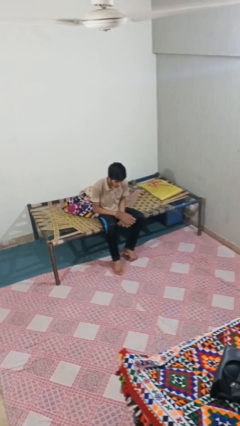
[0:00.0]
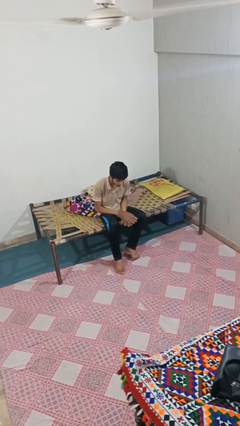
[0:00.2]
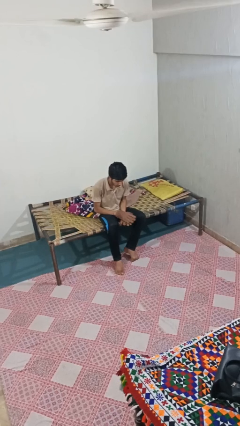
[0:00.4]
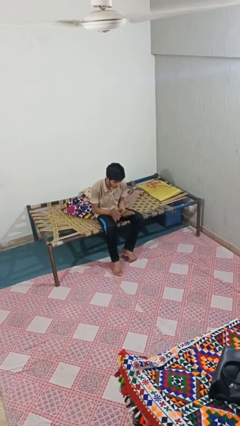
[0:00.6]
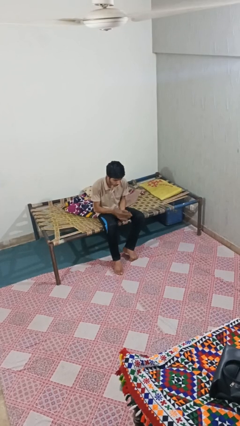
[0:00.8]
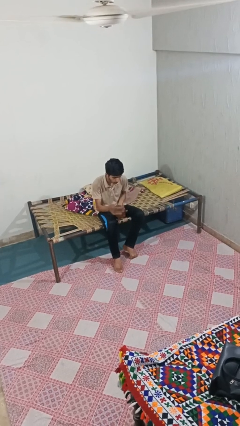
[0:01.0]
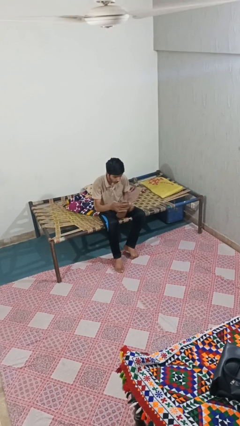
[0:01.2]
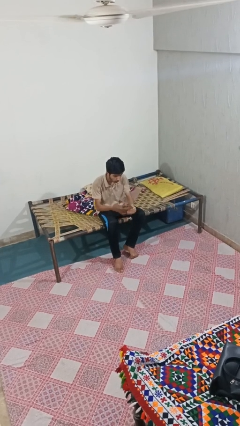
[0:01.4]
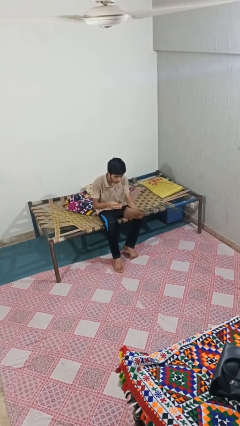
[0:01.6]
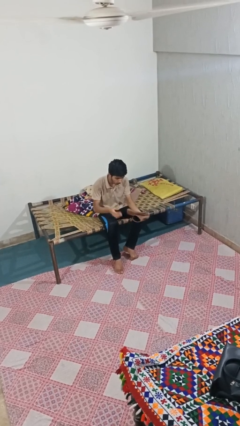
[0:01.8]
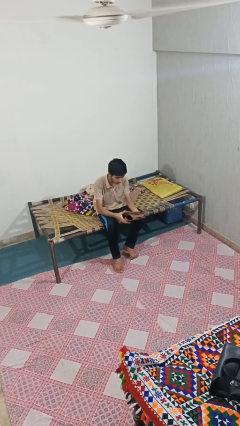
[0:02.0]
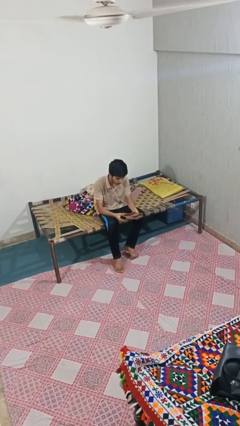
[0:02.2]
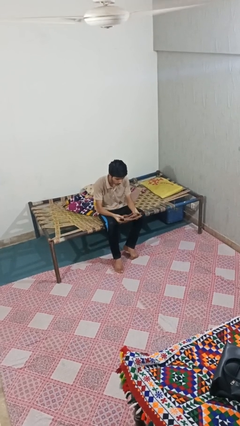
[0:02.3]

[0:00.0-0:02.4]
person takes off gloves

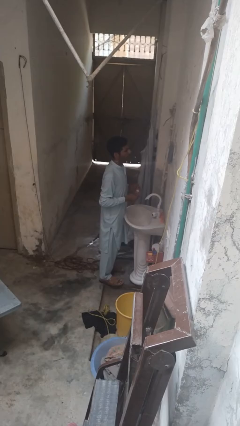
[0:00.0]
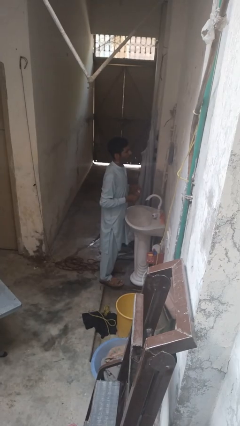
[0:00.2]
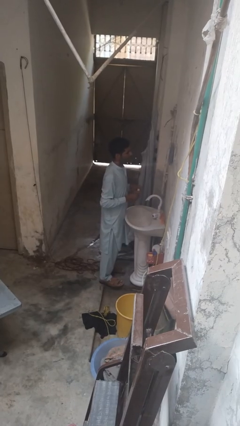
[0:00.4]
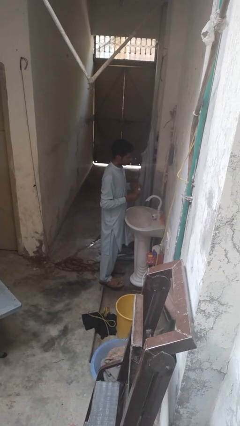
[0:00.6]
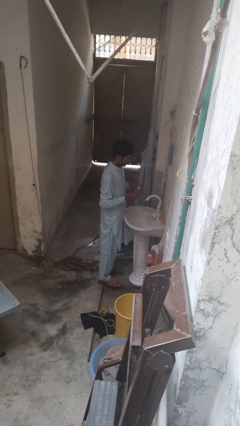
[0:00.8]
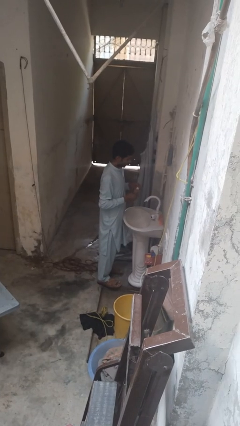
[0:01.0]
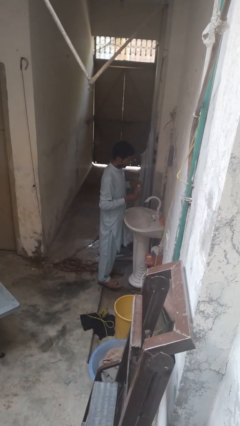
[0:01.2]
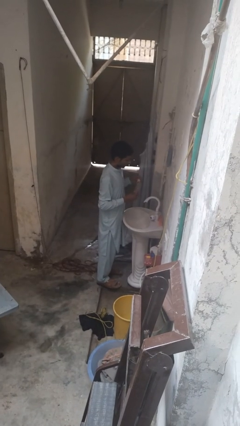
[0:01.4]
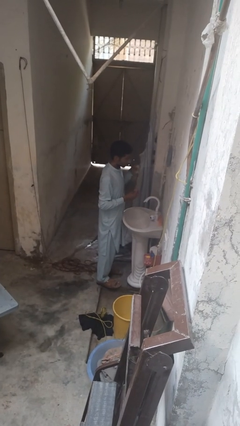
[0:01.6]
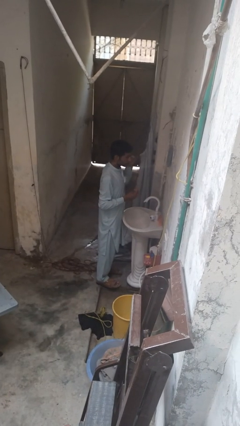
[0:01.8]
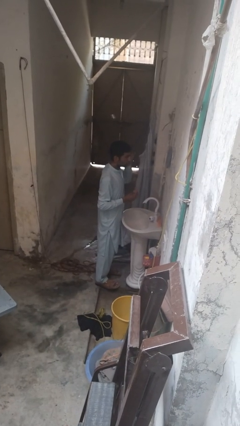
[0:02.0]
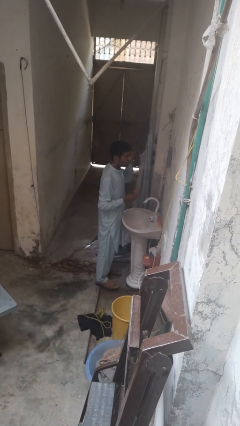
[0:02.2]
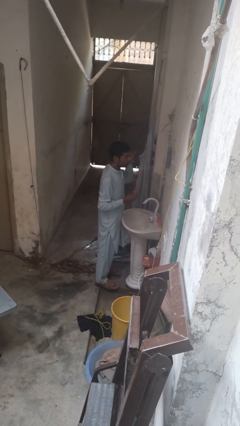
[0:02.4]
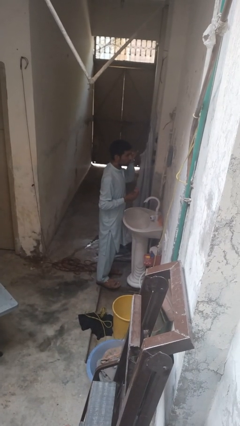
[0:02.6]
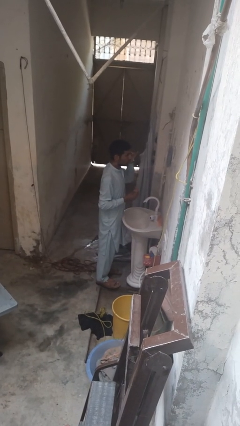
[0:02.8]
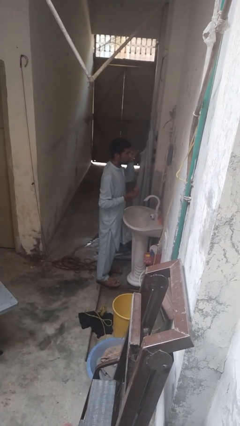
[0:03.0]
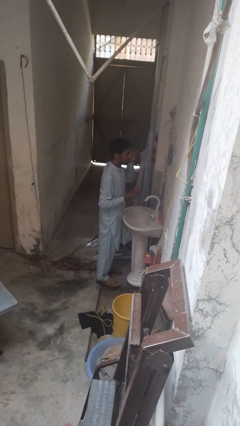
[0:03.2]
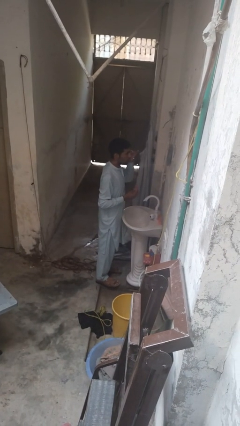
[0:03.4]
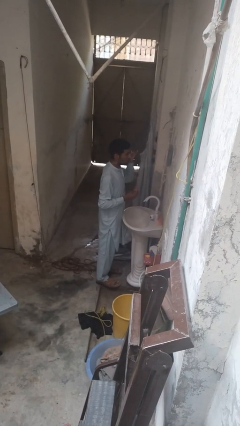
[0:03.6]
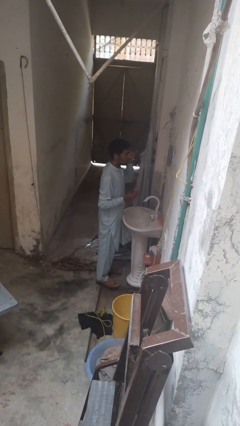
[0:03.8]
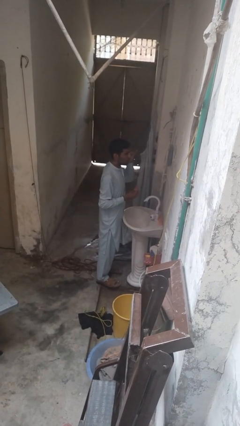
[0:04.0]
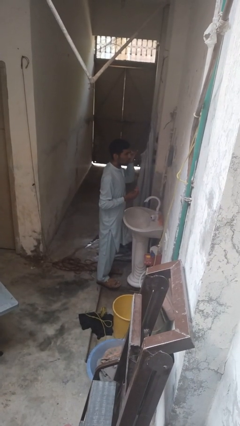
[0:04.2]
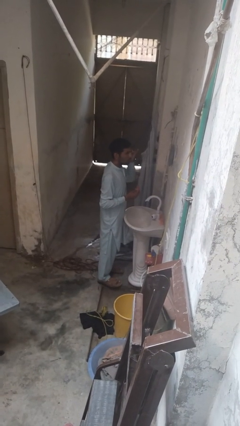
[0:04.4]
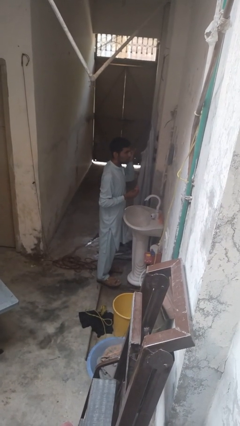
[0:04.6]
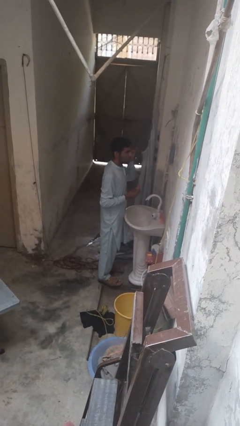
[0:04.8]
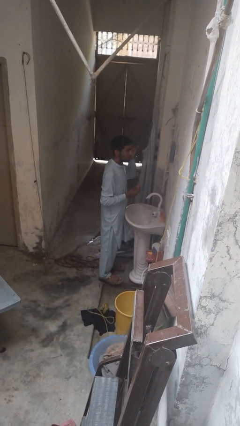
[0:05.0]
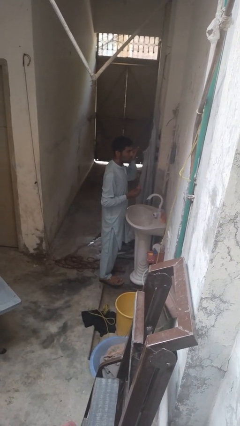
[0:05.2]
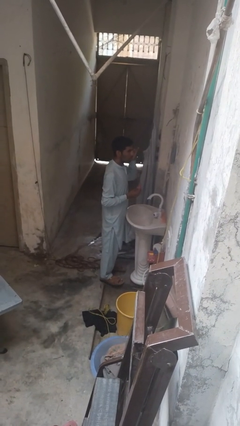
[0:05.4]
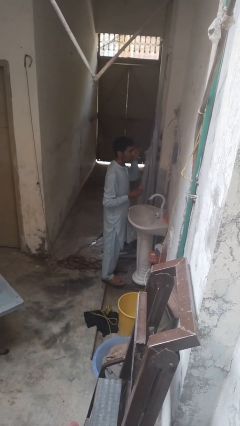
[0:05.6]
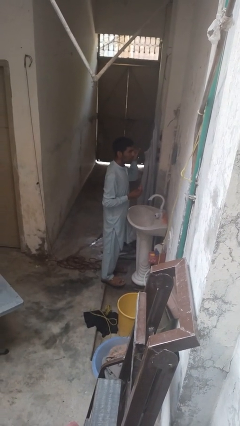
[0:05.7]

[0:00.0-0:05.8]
person applies eye makeup

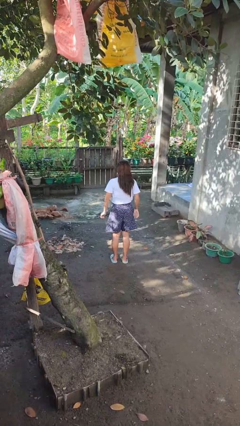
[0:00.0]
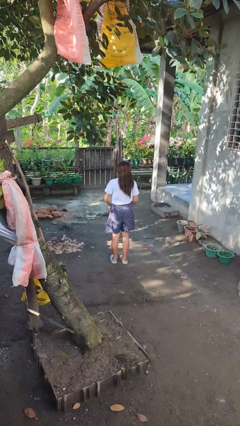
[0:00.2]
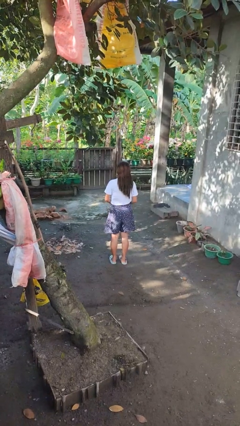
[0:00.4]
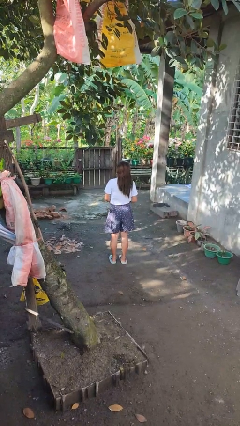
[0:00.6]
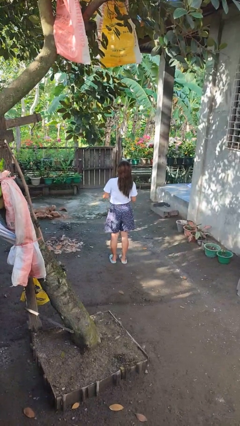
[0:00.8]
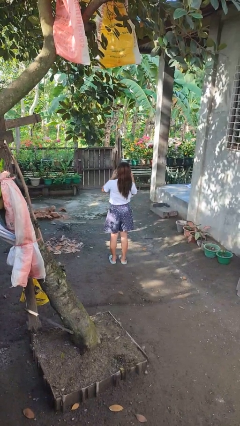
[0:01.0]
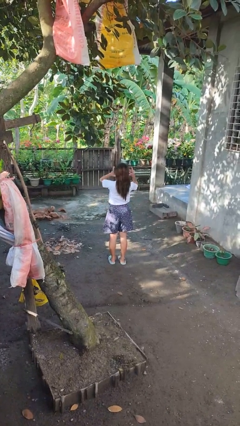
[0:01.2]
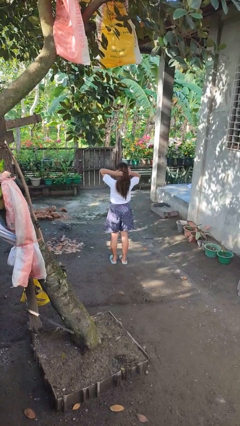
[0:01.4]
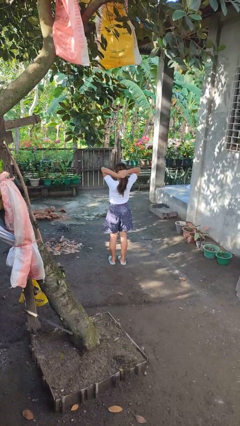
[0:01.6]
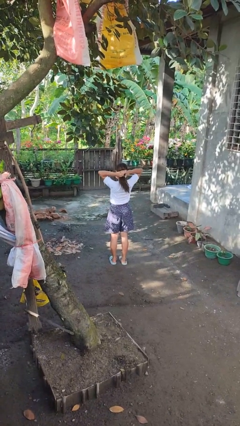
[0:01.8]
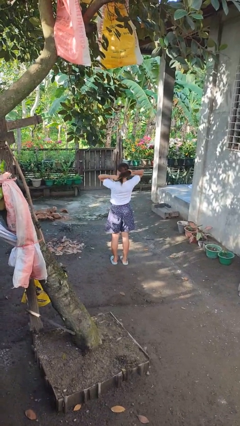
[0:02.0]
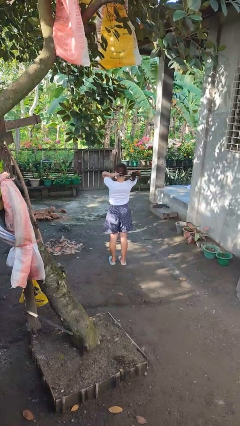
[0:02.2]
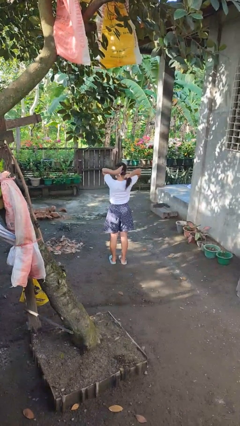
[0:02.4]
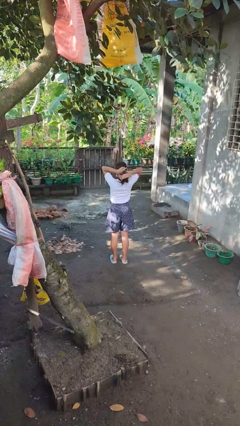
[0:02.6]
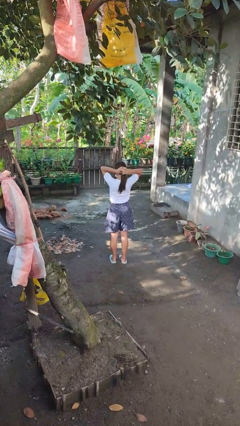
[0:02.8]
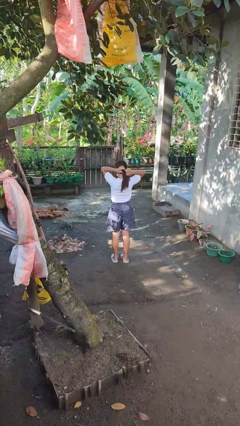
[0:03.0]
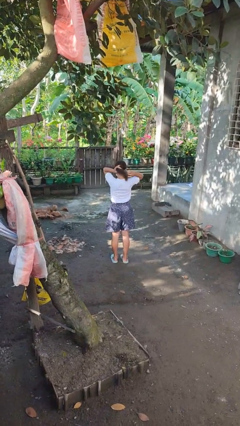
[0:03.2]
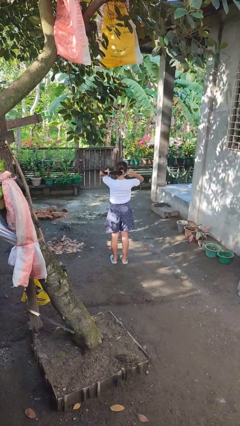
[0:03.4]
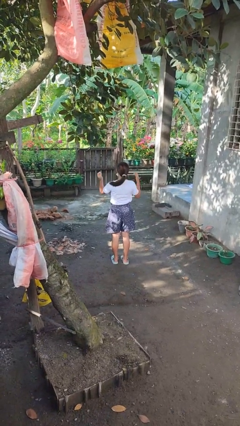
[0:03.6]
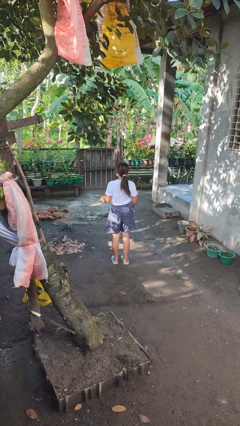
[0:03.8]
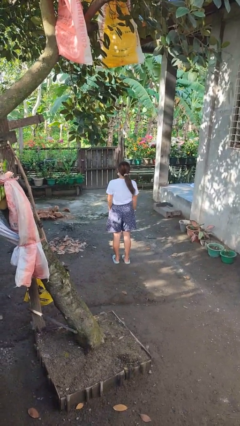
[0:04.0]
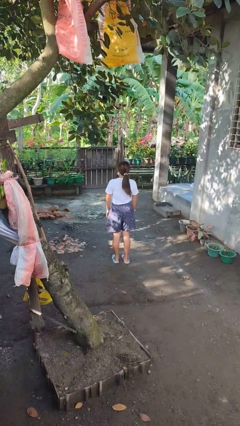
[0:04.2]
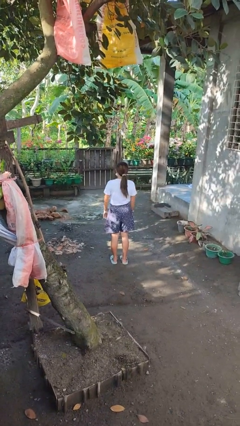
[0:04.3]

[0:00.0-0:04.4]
person puts hair in ponytail

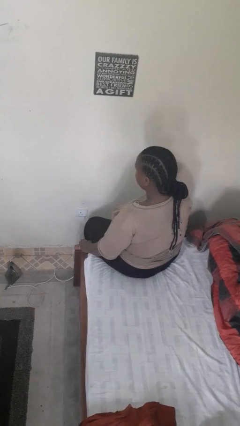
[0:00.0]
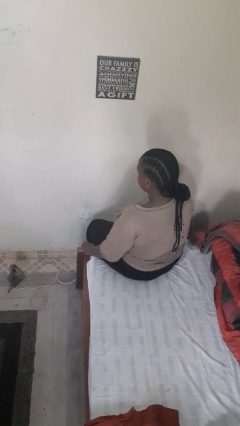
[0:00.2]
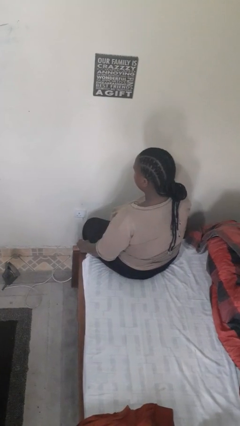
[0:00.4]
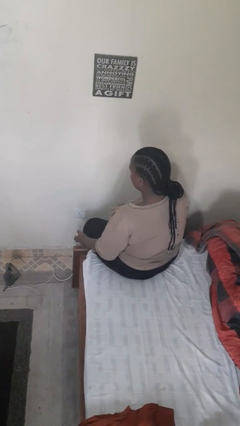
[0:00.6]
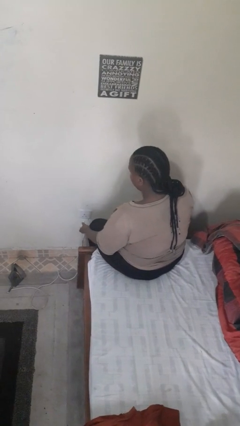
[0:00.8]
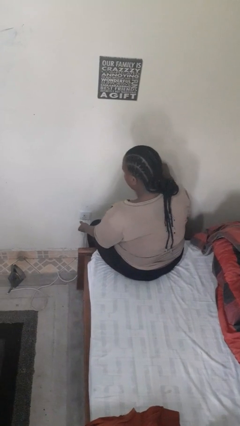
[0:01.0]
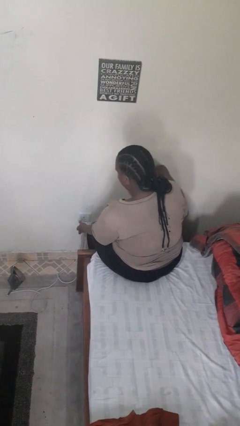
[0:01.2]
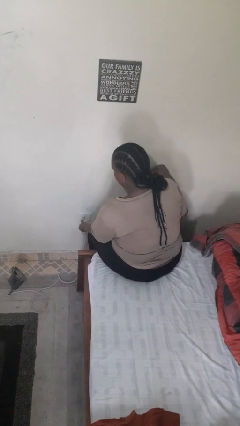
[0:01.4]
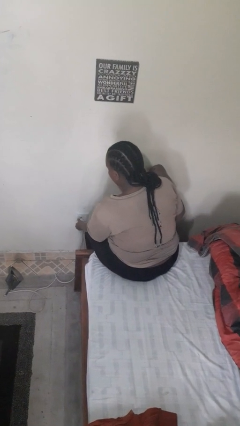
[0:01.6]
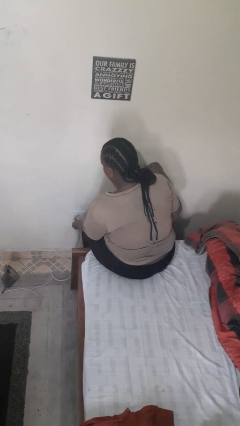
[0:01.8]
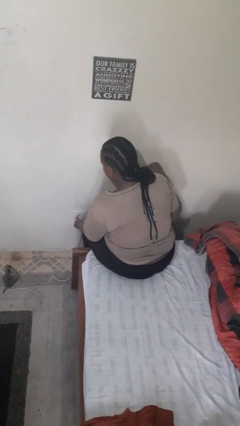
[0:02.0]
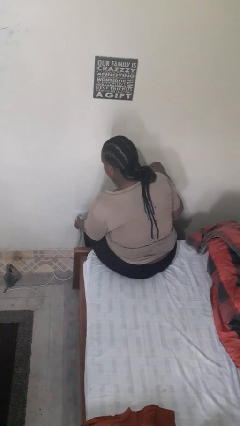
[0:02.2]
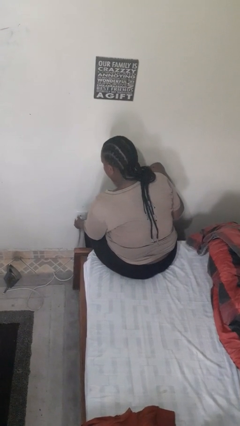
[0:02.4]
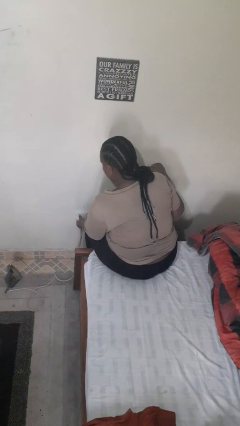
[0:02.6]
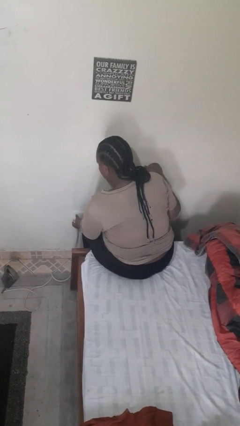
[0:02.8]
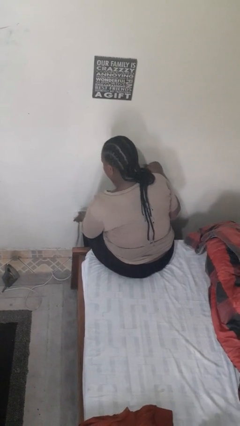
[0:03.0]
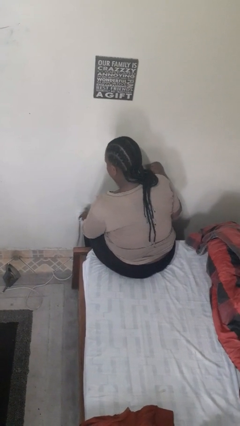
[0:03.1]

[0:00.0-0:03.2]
person plugs into electrical socket

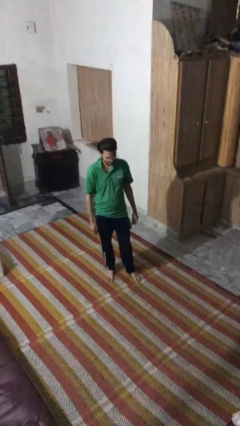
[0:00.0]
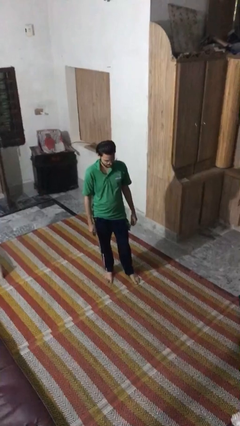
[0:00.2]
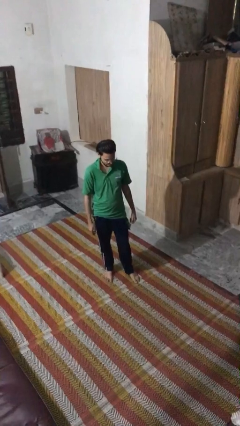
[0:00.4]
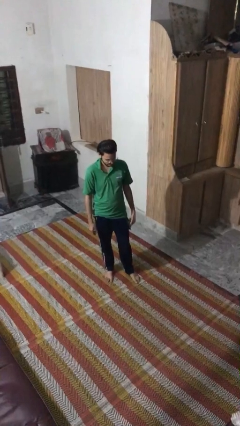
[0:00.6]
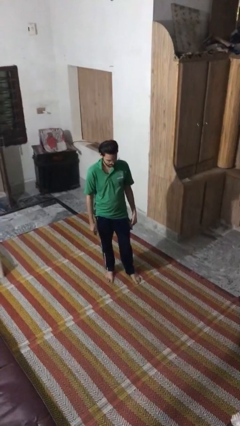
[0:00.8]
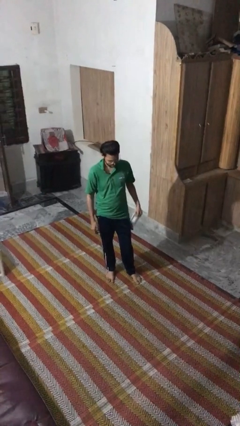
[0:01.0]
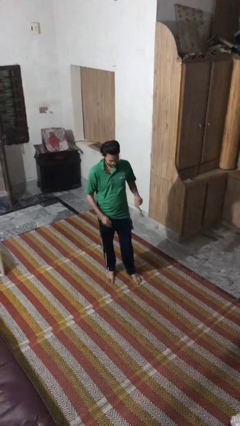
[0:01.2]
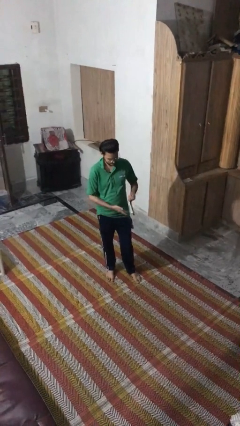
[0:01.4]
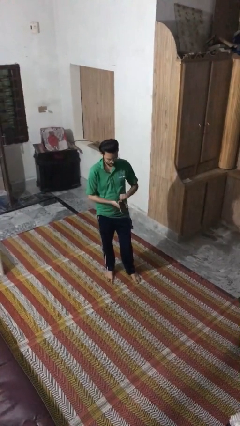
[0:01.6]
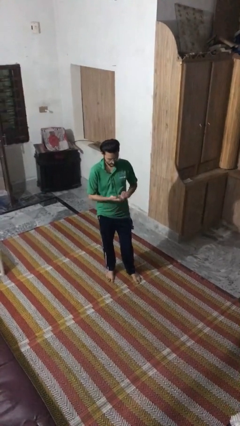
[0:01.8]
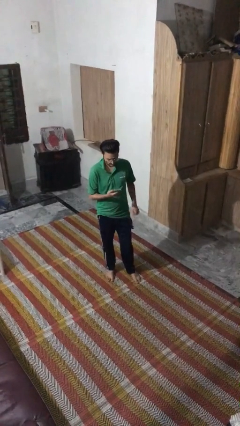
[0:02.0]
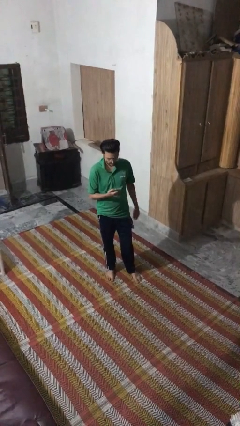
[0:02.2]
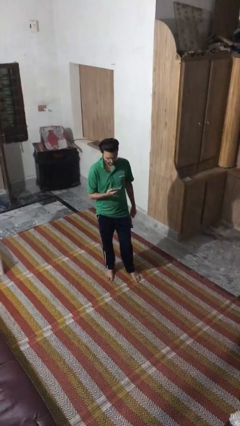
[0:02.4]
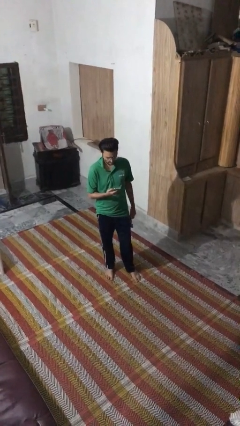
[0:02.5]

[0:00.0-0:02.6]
person takes phone from pocket
